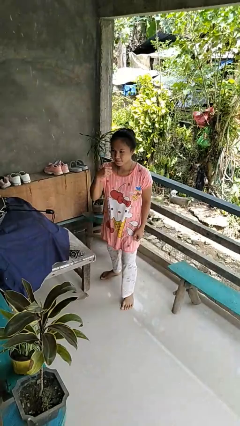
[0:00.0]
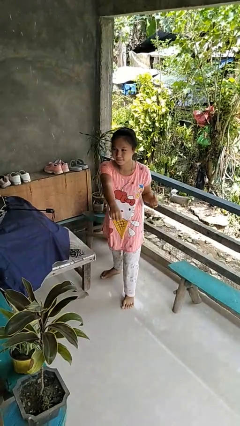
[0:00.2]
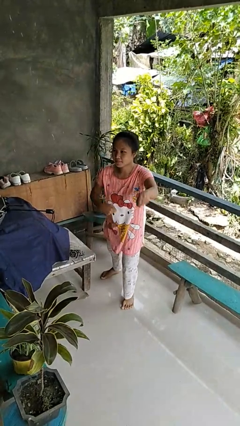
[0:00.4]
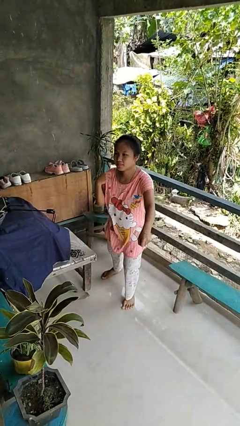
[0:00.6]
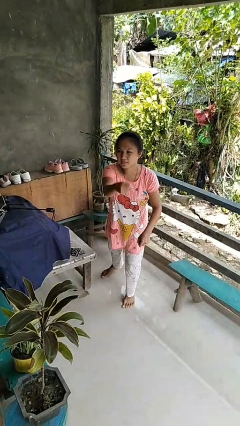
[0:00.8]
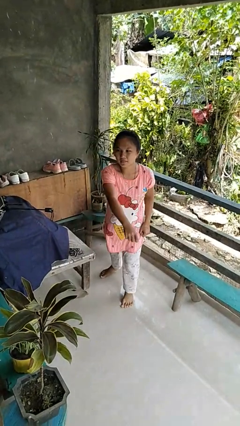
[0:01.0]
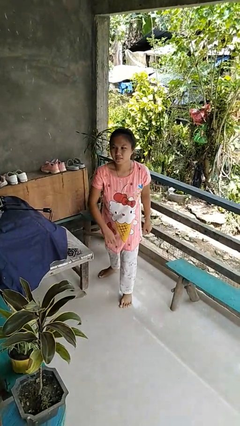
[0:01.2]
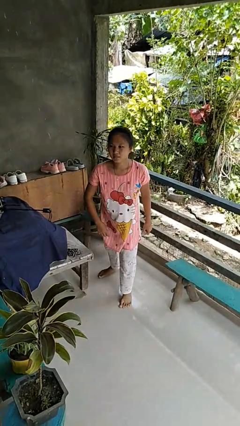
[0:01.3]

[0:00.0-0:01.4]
person karate chop

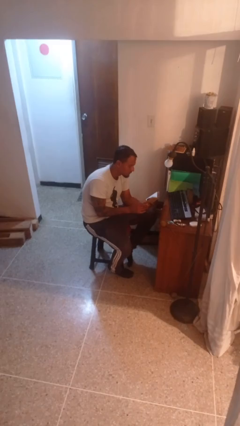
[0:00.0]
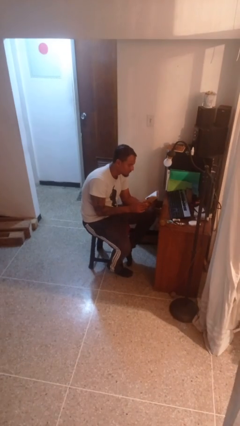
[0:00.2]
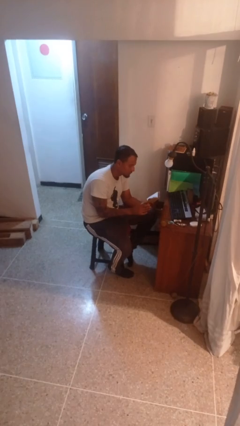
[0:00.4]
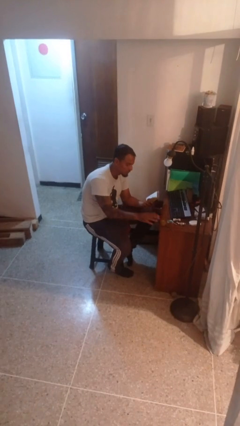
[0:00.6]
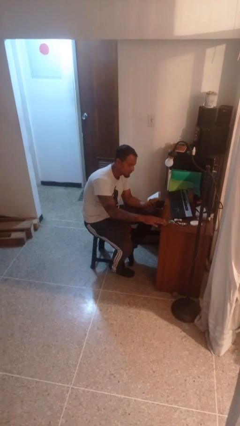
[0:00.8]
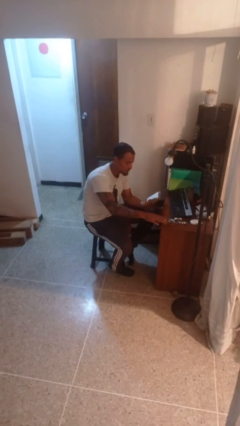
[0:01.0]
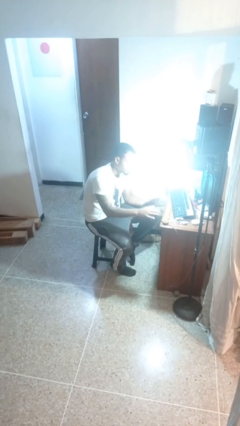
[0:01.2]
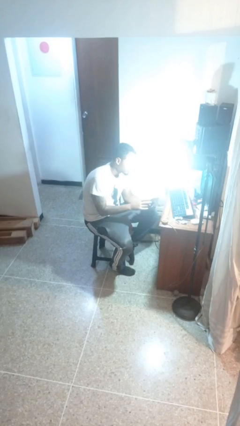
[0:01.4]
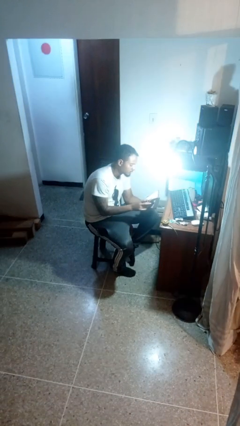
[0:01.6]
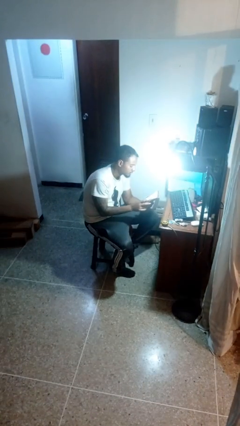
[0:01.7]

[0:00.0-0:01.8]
person turns on lamp

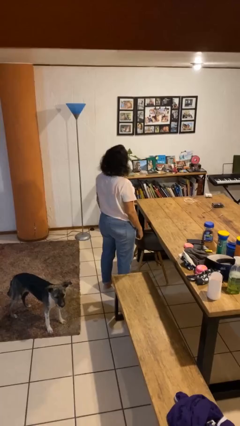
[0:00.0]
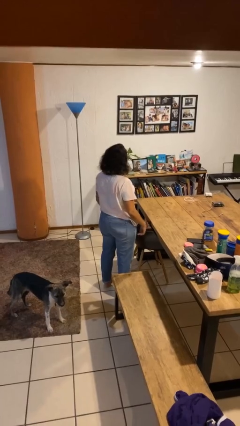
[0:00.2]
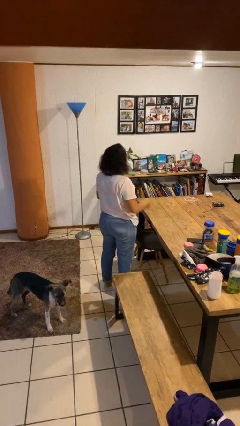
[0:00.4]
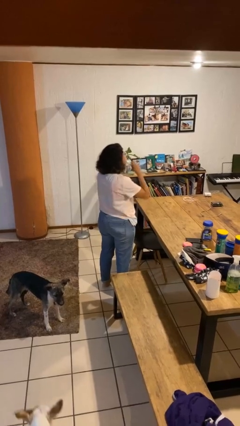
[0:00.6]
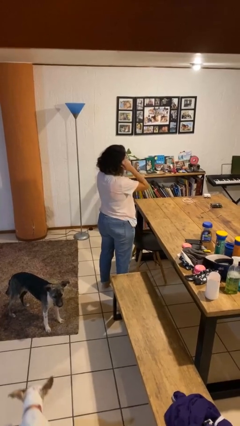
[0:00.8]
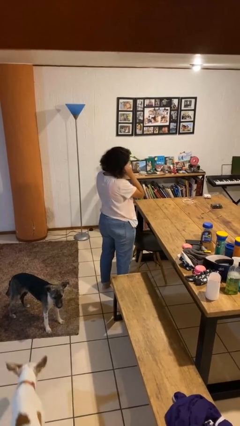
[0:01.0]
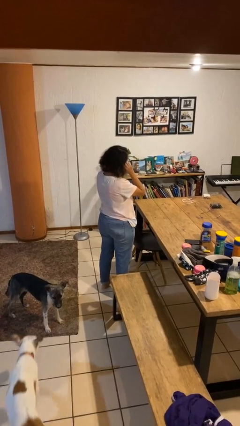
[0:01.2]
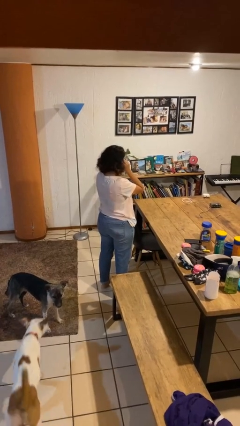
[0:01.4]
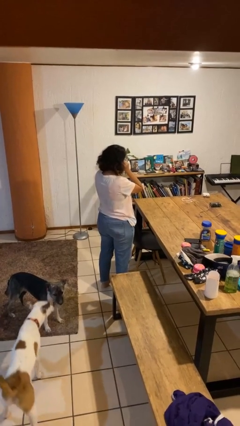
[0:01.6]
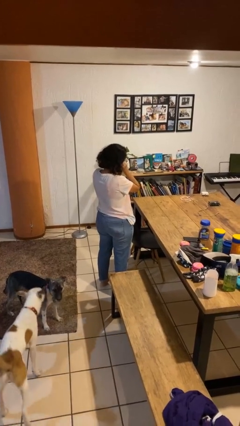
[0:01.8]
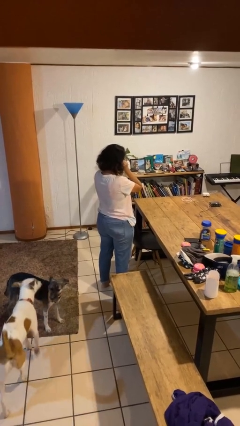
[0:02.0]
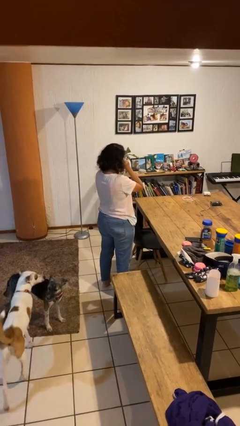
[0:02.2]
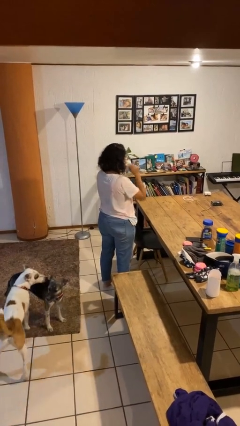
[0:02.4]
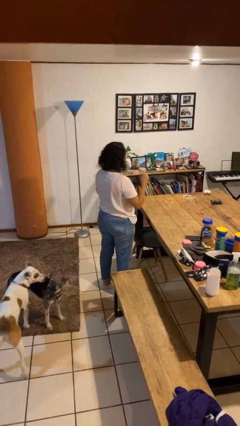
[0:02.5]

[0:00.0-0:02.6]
person puts fingers in ear

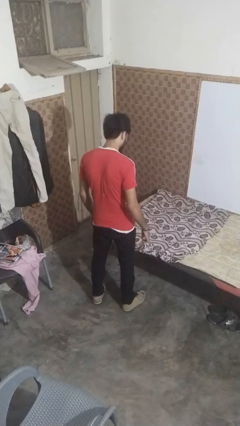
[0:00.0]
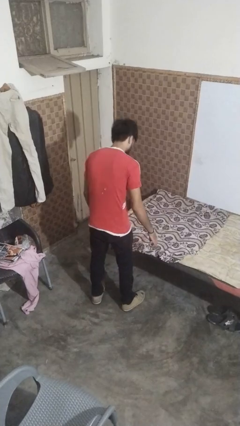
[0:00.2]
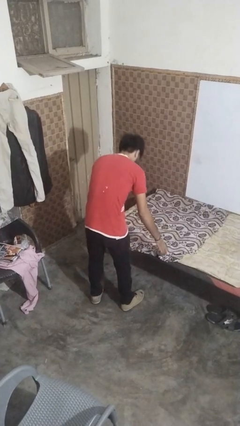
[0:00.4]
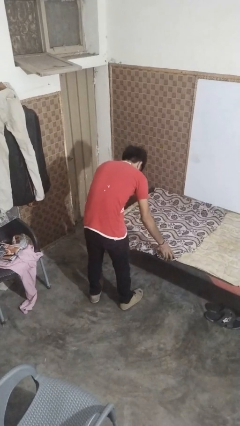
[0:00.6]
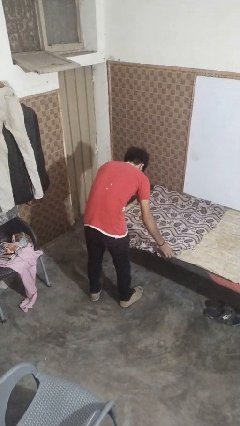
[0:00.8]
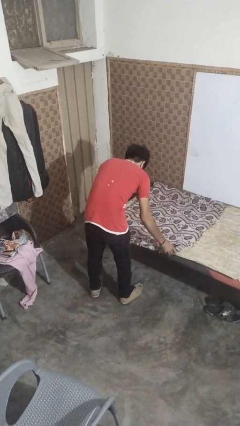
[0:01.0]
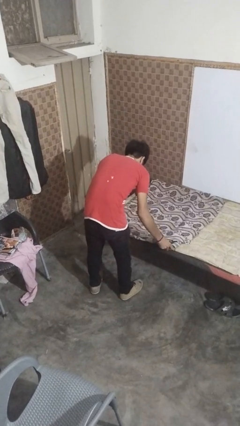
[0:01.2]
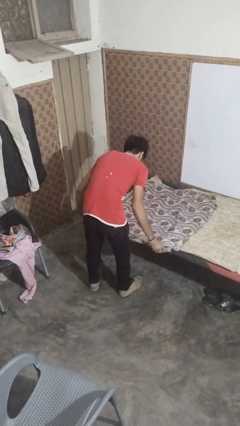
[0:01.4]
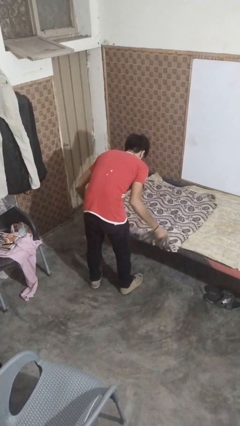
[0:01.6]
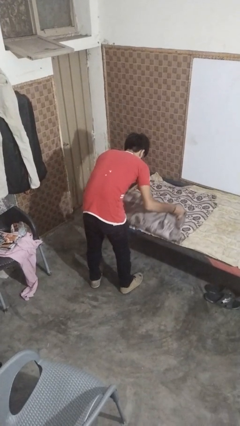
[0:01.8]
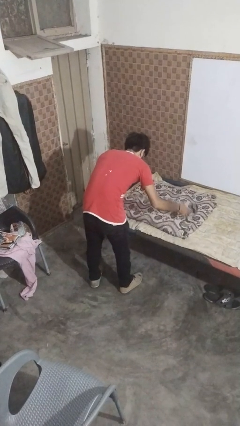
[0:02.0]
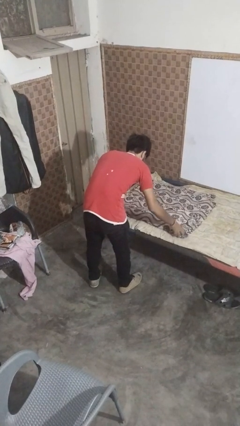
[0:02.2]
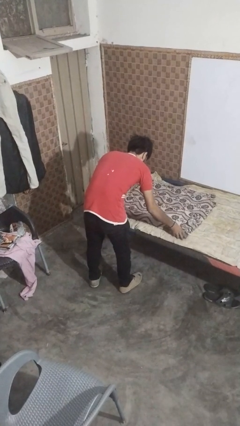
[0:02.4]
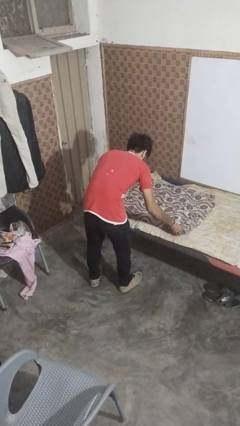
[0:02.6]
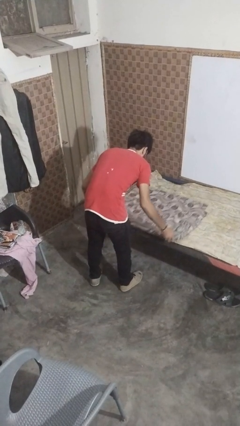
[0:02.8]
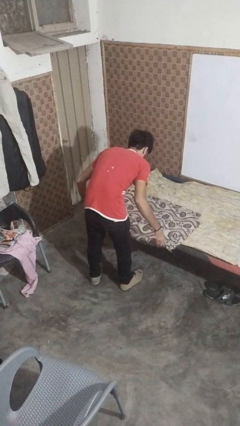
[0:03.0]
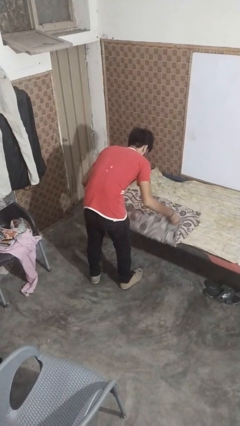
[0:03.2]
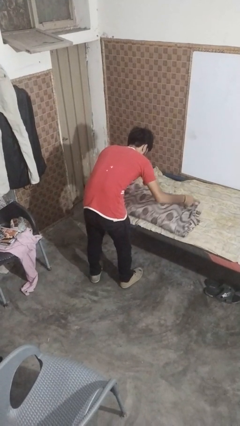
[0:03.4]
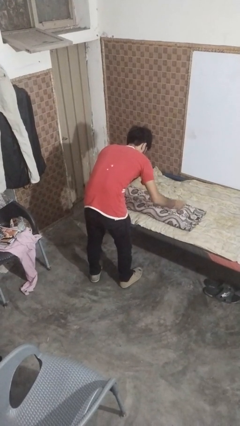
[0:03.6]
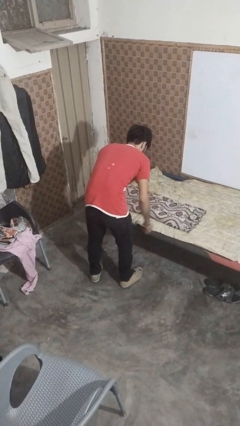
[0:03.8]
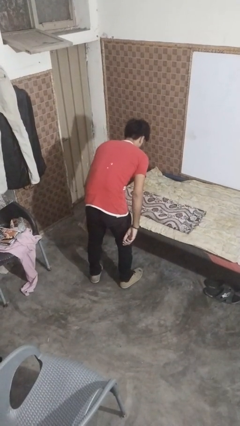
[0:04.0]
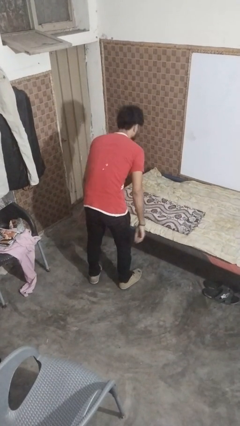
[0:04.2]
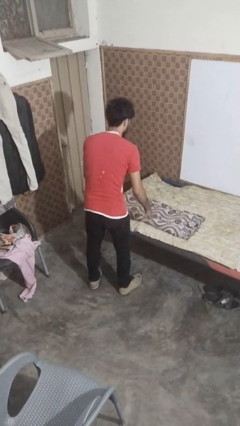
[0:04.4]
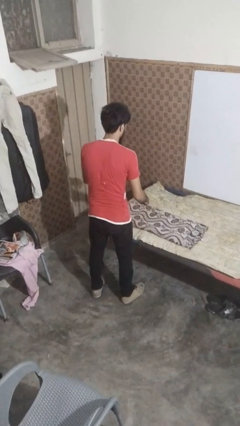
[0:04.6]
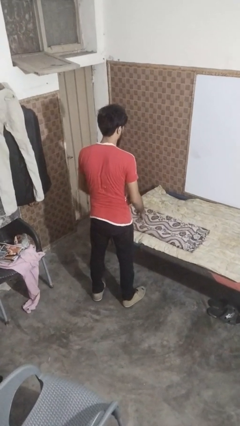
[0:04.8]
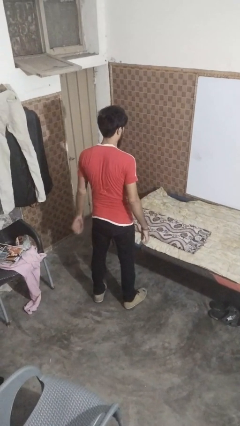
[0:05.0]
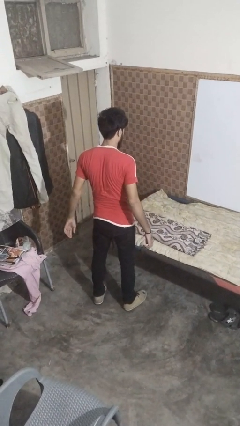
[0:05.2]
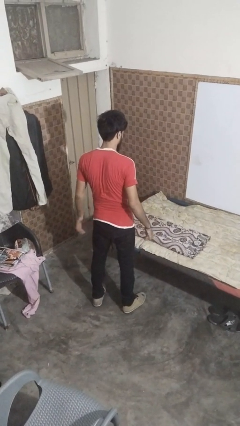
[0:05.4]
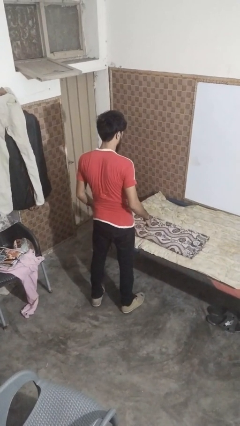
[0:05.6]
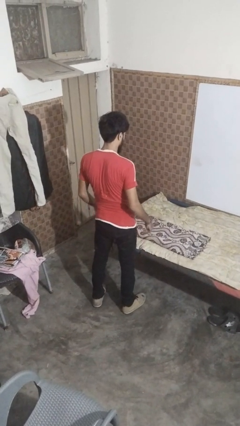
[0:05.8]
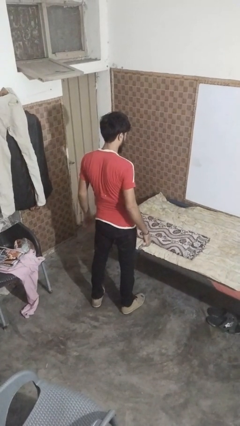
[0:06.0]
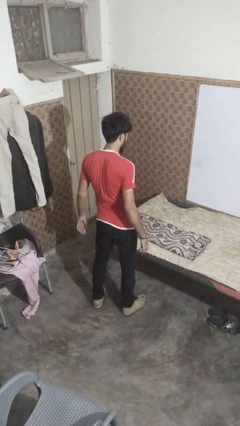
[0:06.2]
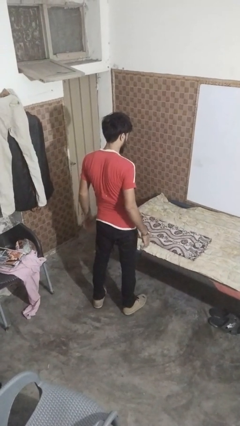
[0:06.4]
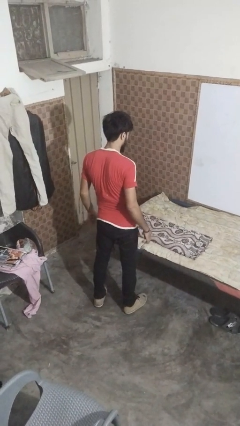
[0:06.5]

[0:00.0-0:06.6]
person folds blanket

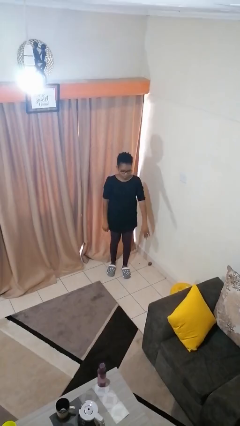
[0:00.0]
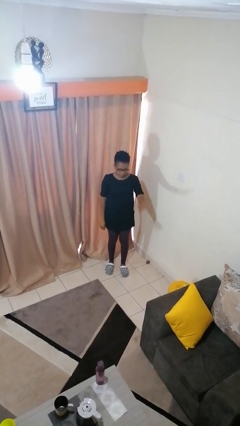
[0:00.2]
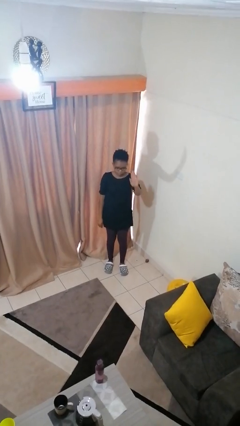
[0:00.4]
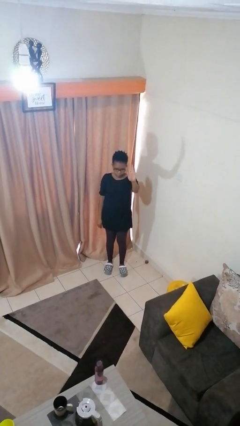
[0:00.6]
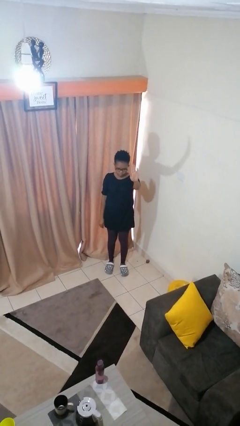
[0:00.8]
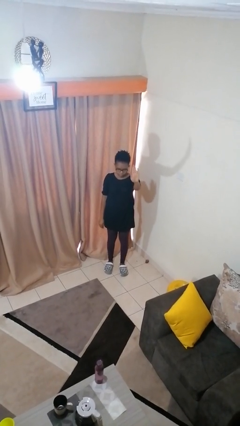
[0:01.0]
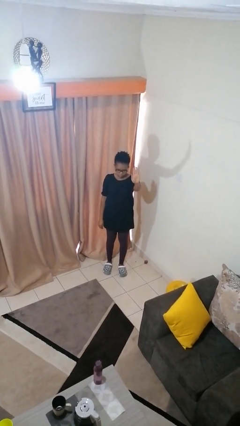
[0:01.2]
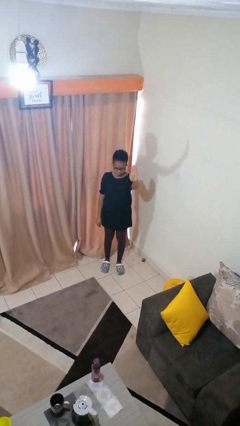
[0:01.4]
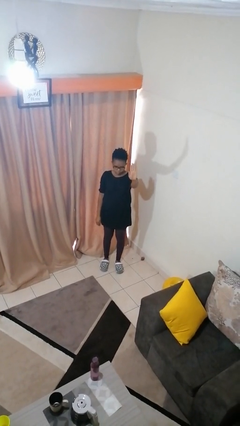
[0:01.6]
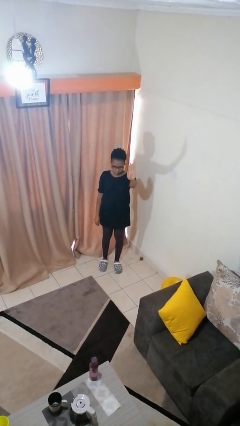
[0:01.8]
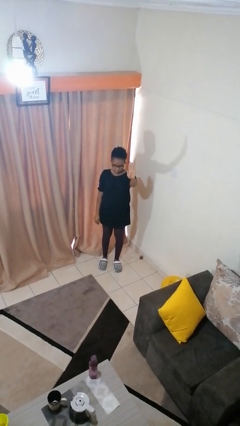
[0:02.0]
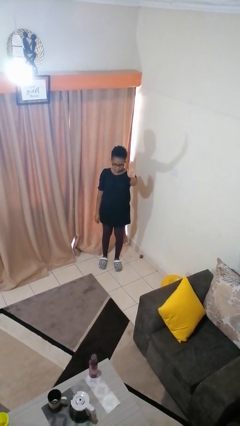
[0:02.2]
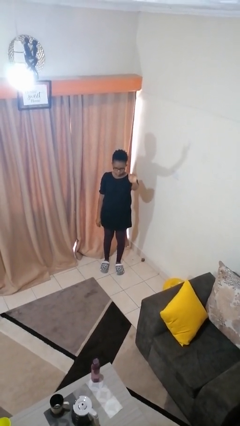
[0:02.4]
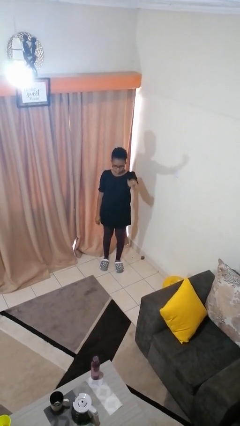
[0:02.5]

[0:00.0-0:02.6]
person gestures stop

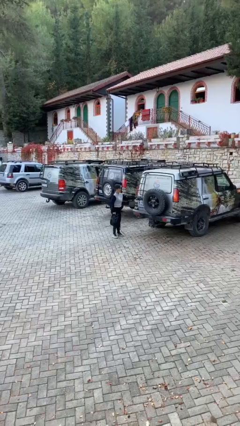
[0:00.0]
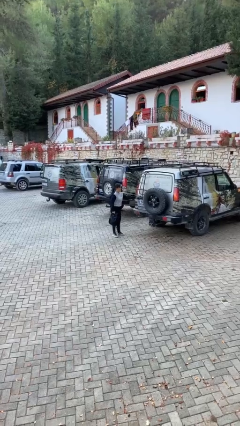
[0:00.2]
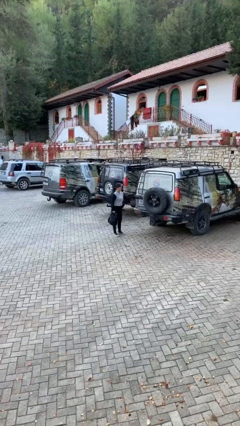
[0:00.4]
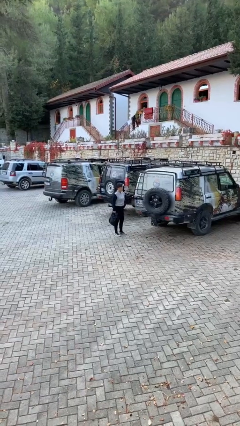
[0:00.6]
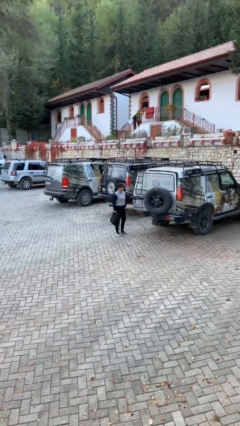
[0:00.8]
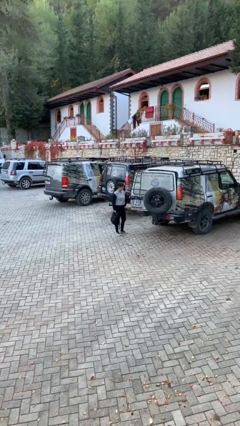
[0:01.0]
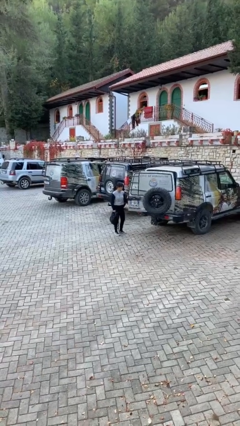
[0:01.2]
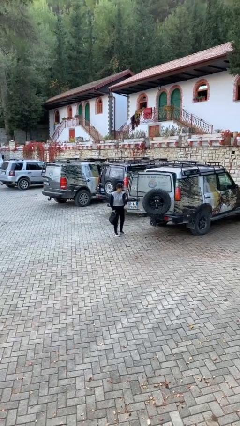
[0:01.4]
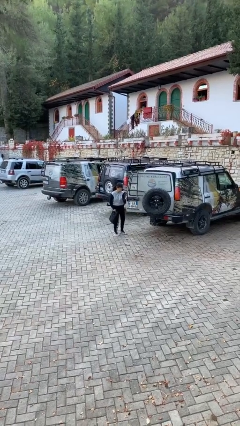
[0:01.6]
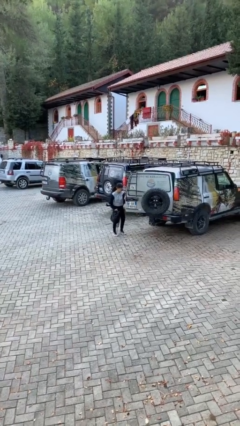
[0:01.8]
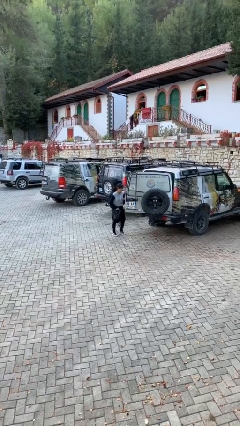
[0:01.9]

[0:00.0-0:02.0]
person opens car door

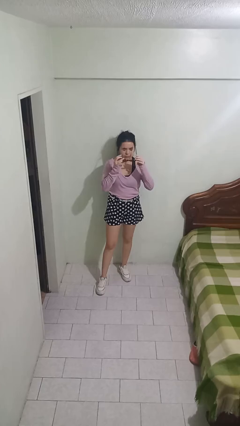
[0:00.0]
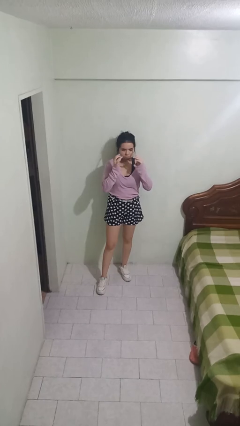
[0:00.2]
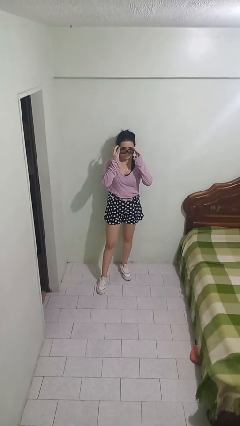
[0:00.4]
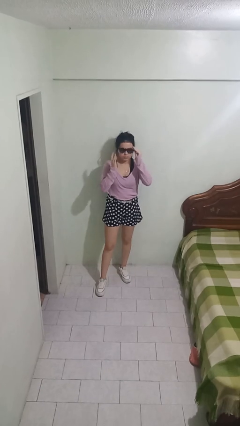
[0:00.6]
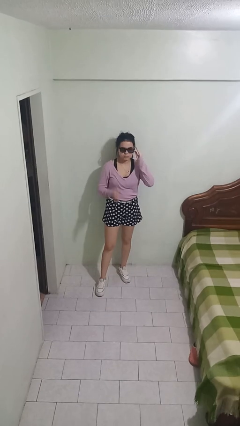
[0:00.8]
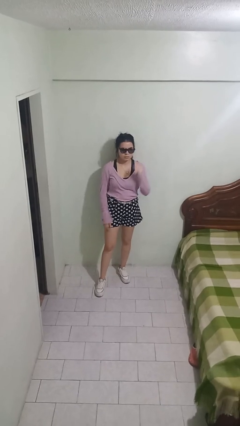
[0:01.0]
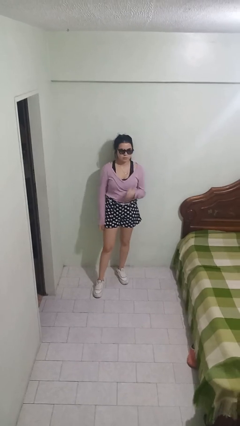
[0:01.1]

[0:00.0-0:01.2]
person puts on sunglasses
